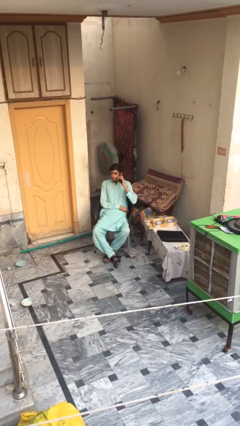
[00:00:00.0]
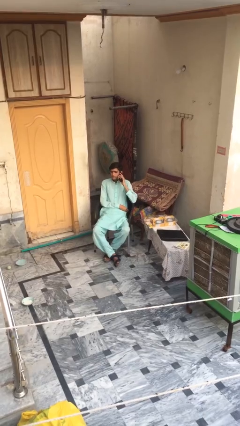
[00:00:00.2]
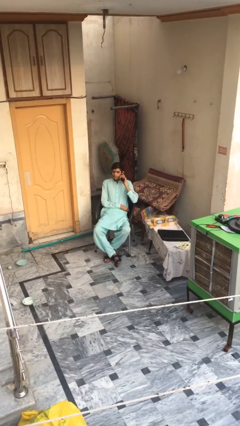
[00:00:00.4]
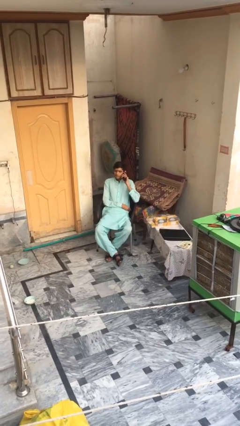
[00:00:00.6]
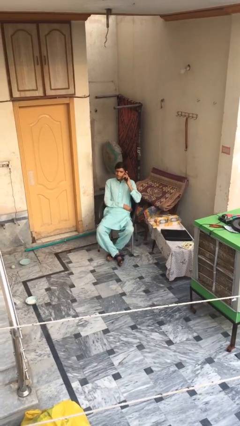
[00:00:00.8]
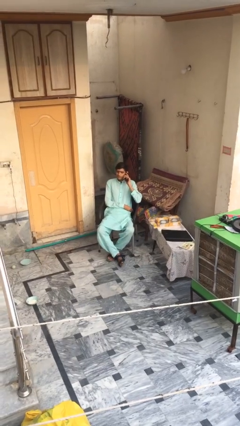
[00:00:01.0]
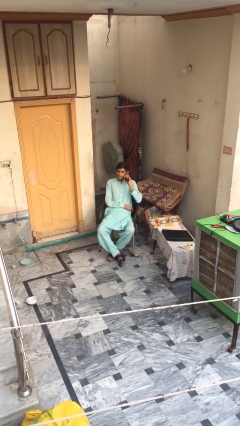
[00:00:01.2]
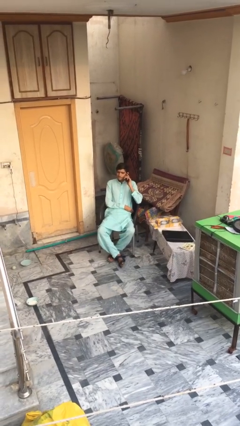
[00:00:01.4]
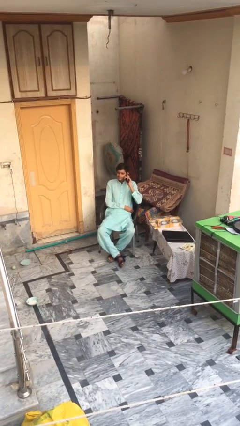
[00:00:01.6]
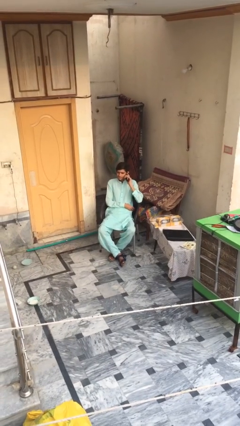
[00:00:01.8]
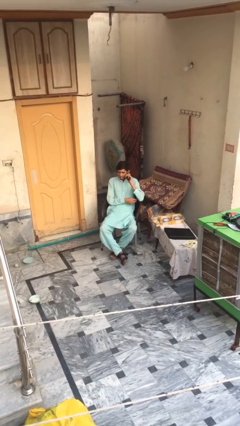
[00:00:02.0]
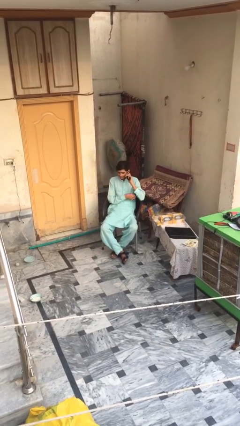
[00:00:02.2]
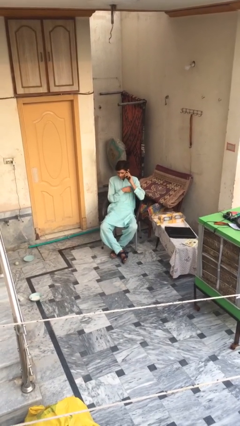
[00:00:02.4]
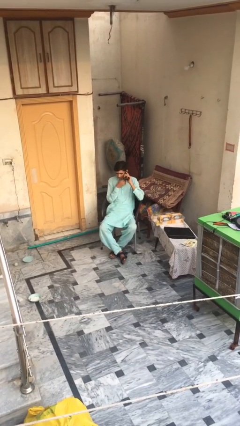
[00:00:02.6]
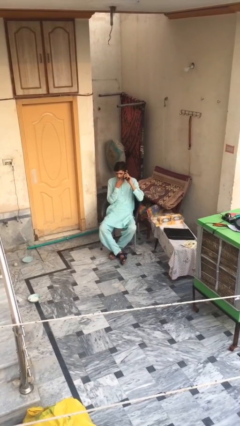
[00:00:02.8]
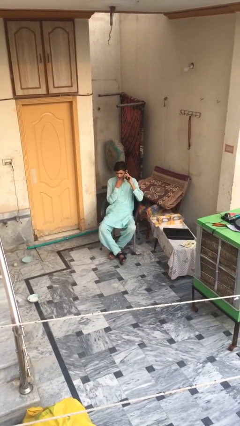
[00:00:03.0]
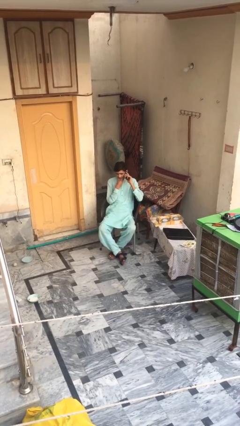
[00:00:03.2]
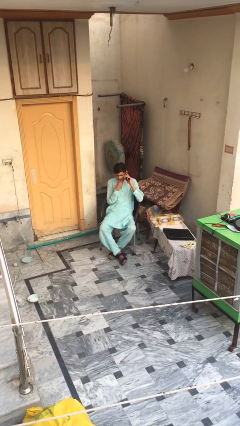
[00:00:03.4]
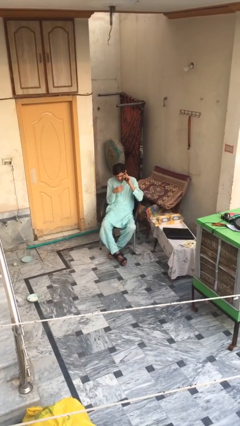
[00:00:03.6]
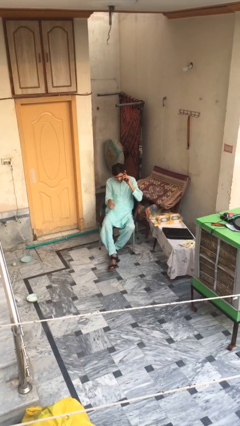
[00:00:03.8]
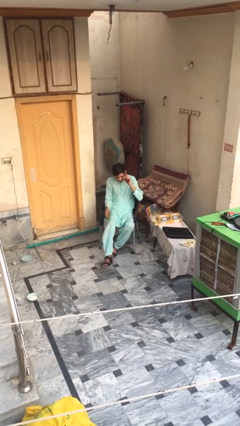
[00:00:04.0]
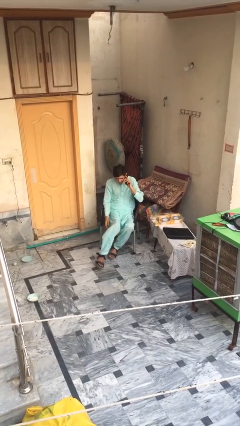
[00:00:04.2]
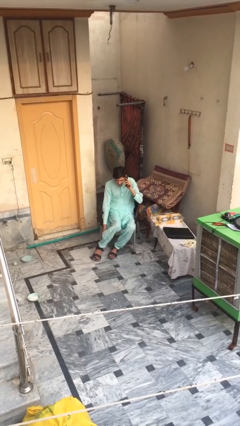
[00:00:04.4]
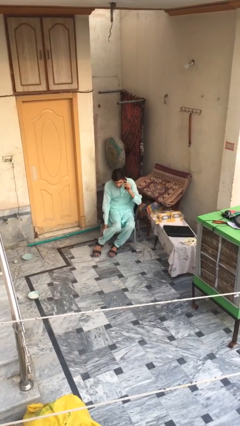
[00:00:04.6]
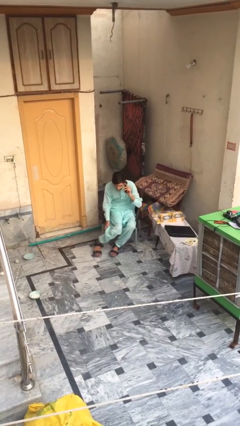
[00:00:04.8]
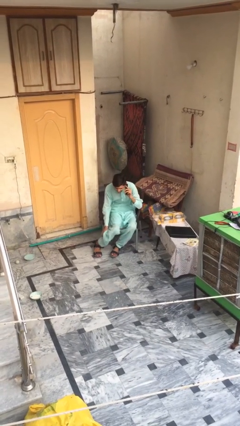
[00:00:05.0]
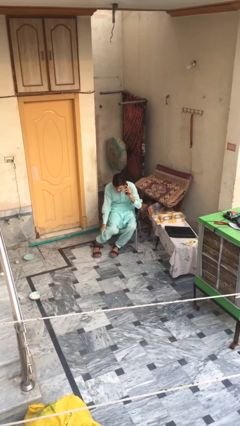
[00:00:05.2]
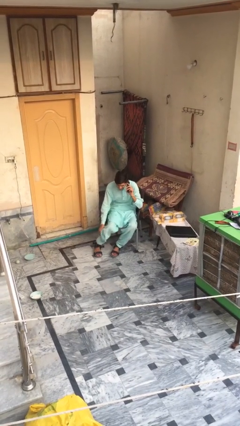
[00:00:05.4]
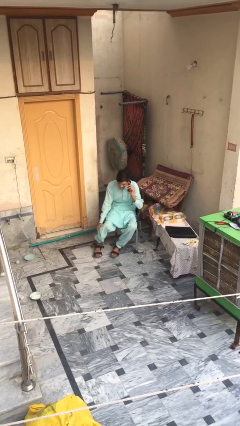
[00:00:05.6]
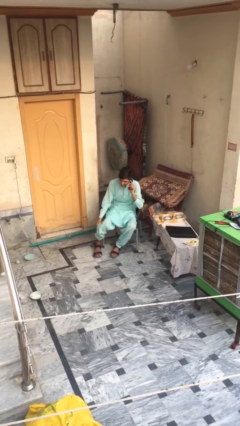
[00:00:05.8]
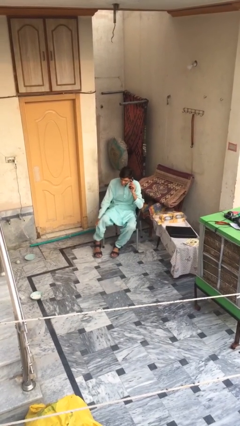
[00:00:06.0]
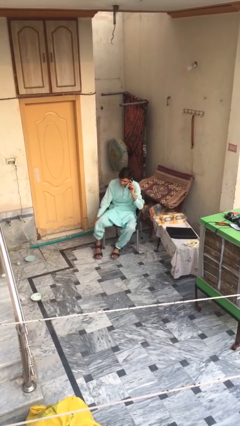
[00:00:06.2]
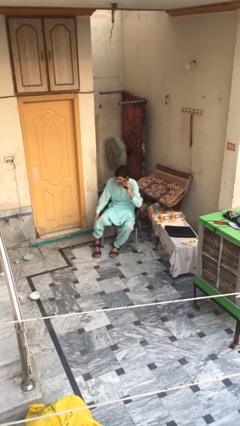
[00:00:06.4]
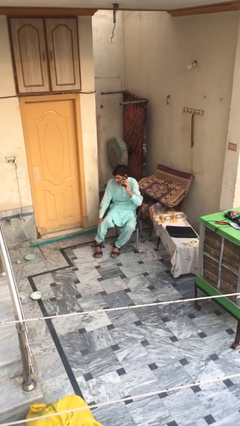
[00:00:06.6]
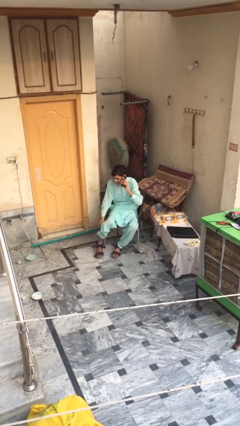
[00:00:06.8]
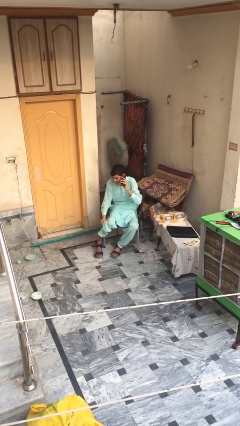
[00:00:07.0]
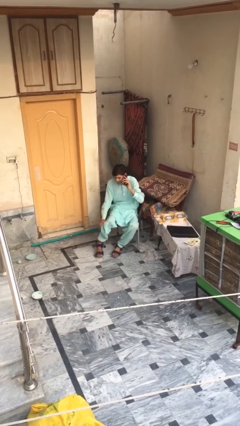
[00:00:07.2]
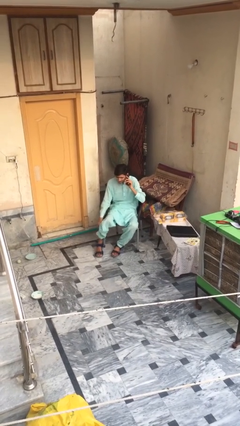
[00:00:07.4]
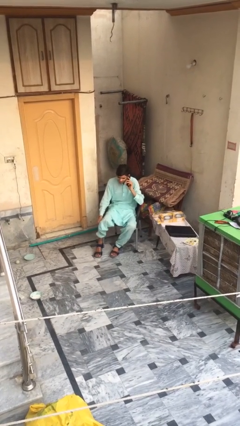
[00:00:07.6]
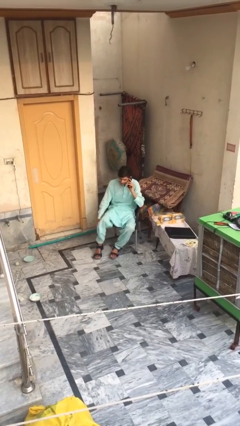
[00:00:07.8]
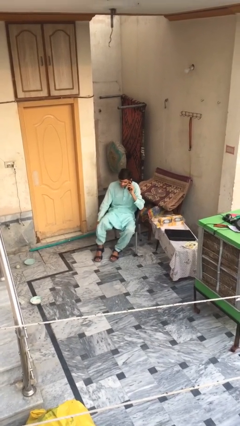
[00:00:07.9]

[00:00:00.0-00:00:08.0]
person talks on phone

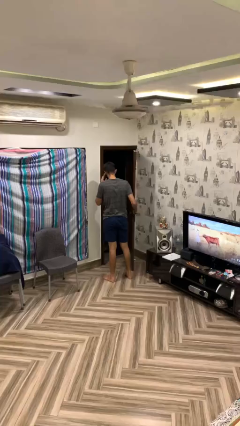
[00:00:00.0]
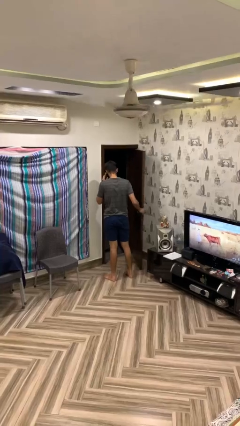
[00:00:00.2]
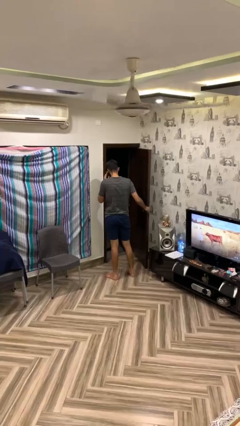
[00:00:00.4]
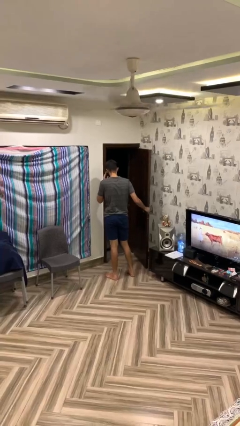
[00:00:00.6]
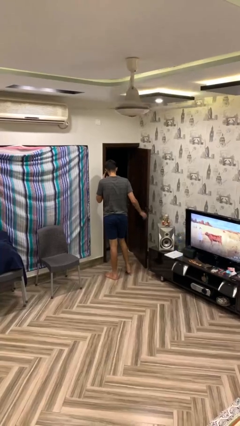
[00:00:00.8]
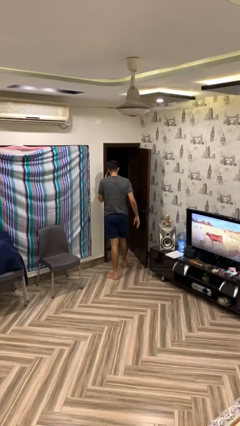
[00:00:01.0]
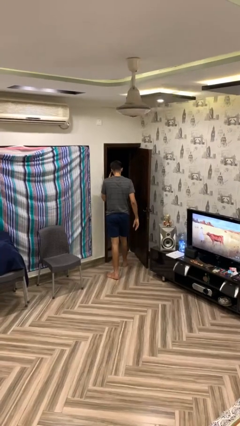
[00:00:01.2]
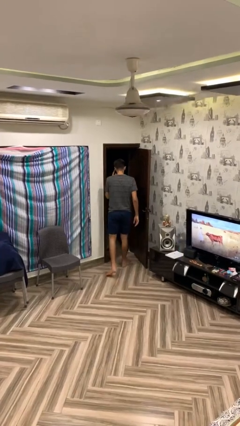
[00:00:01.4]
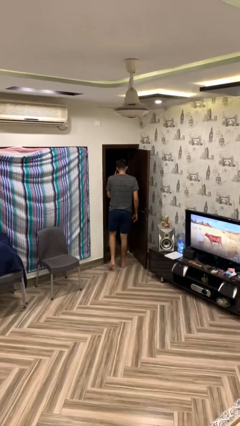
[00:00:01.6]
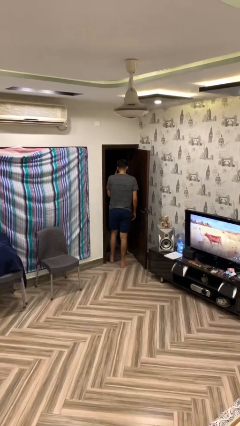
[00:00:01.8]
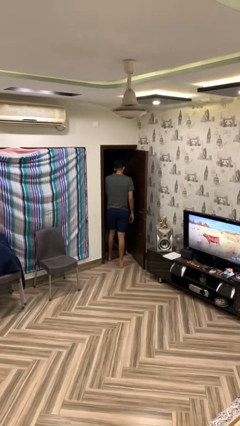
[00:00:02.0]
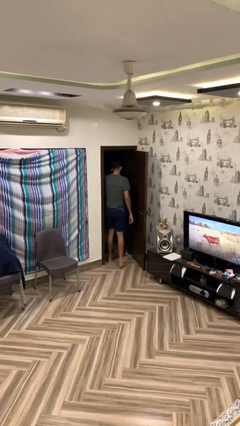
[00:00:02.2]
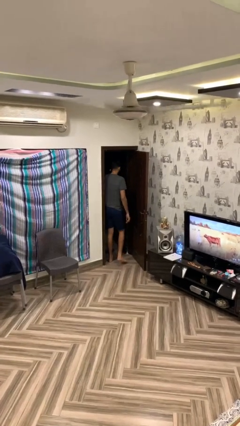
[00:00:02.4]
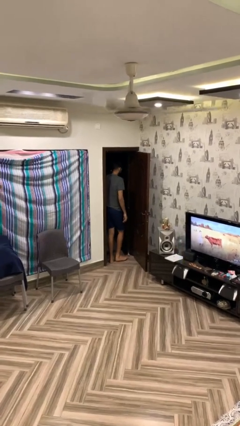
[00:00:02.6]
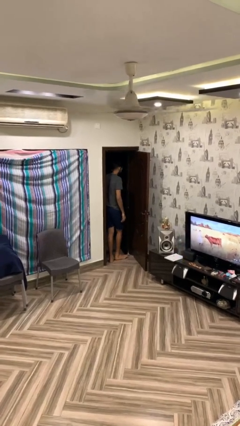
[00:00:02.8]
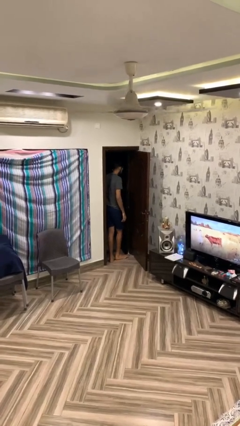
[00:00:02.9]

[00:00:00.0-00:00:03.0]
person exits scene through structure

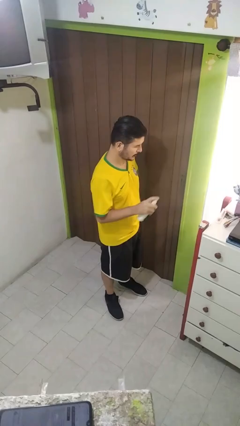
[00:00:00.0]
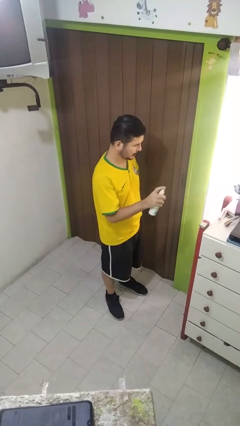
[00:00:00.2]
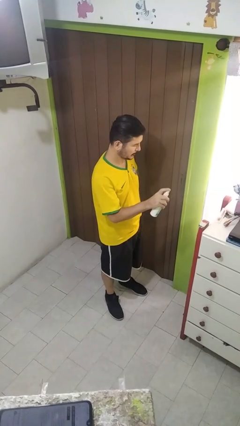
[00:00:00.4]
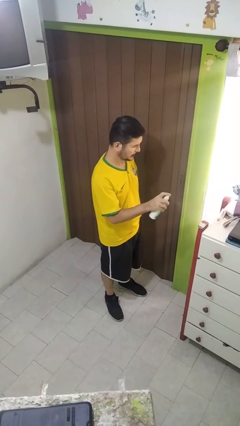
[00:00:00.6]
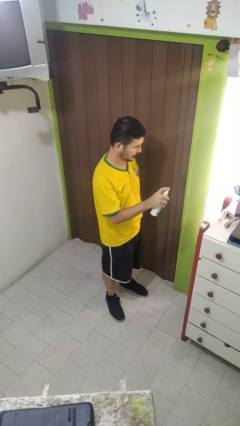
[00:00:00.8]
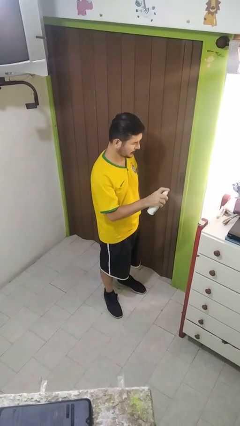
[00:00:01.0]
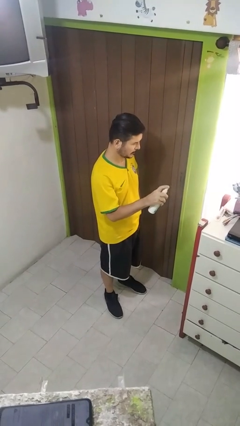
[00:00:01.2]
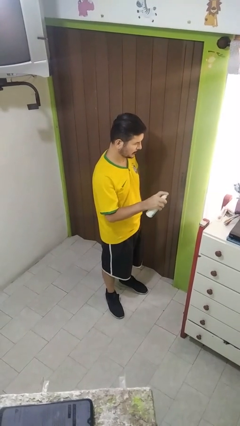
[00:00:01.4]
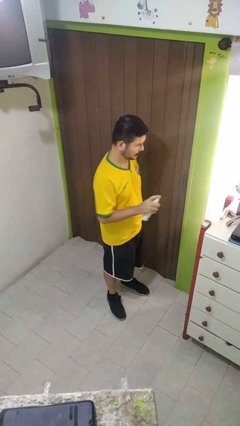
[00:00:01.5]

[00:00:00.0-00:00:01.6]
person sprays from bottle

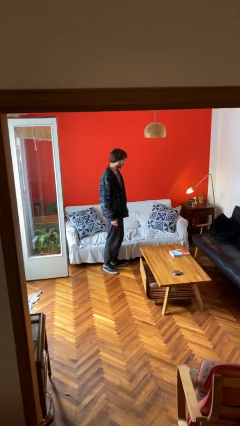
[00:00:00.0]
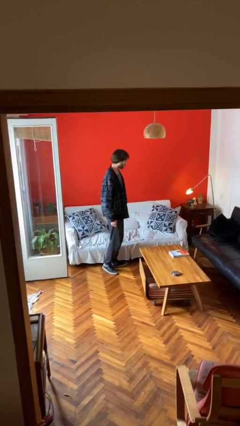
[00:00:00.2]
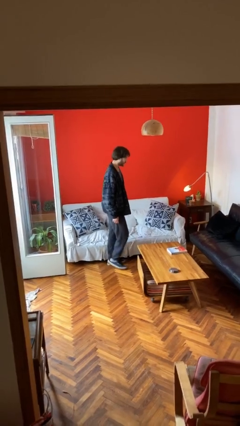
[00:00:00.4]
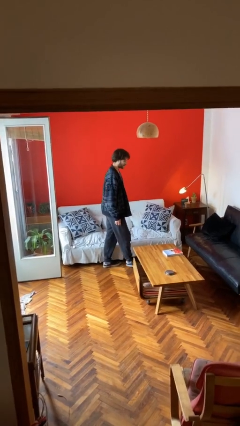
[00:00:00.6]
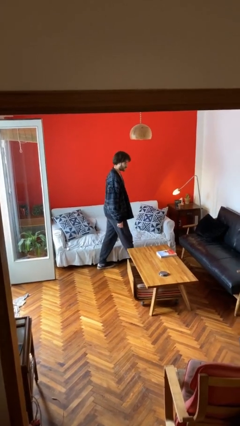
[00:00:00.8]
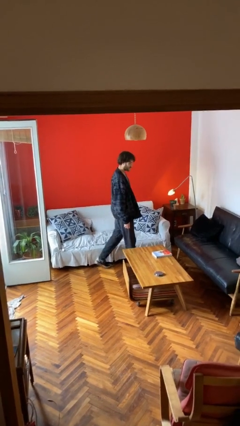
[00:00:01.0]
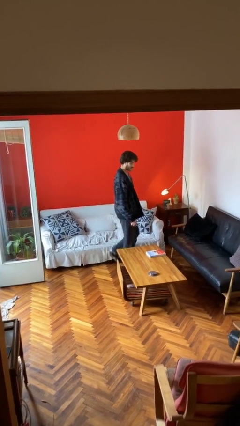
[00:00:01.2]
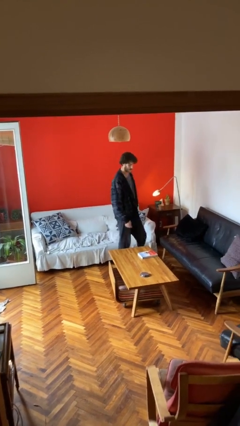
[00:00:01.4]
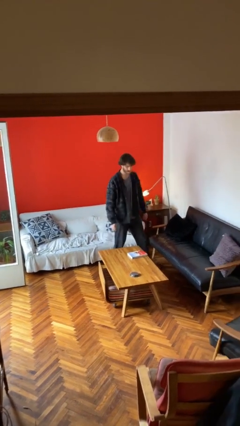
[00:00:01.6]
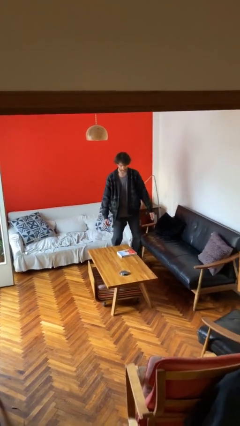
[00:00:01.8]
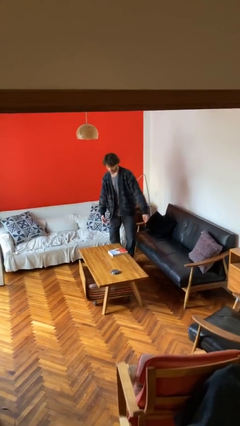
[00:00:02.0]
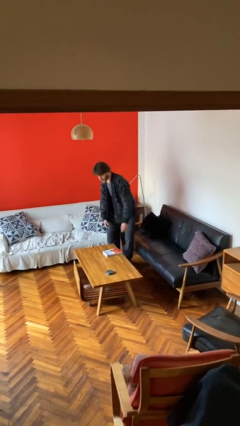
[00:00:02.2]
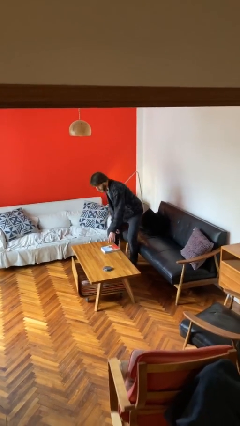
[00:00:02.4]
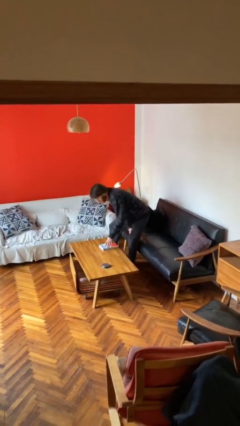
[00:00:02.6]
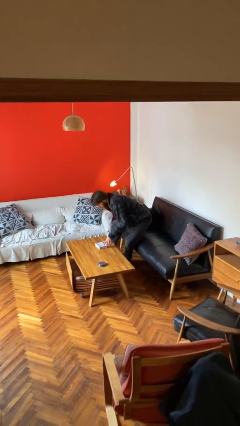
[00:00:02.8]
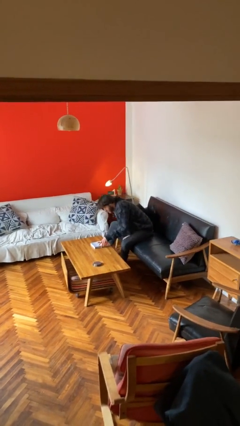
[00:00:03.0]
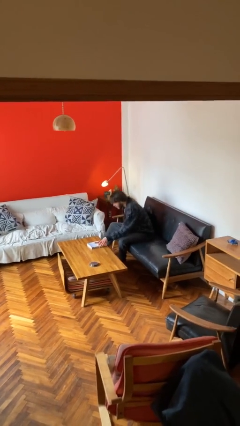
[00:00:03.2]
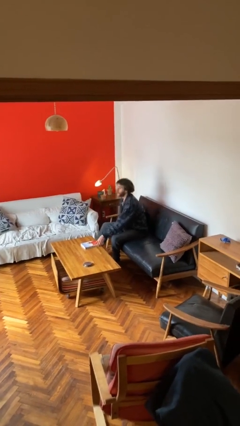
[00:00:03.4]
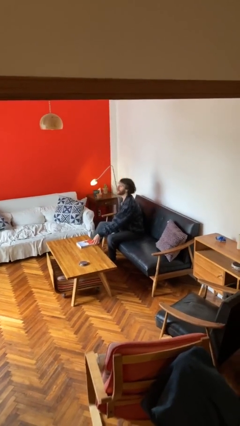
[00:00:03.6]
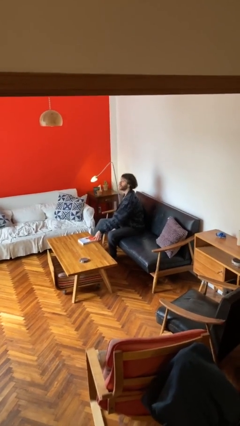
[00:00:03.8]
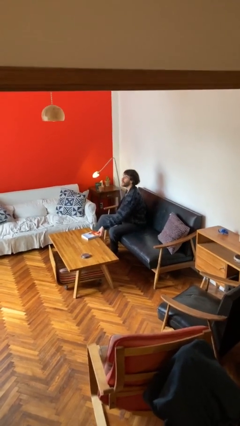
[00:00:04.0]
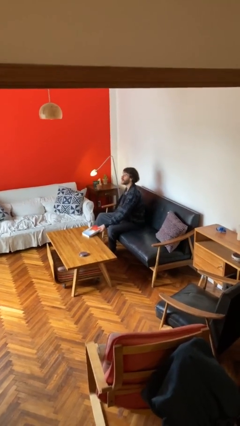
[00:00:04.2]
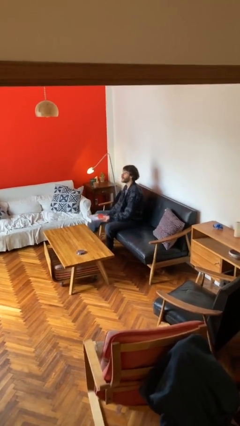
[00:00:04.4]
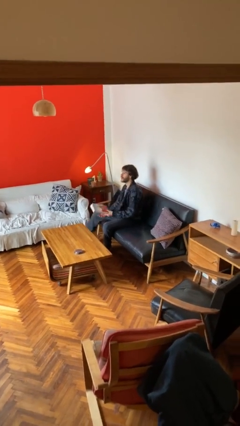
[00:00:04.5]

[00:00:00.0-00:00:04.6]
person sits down

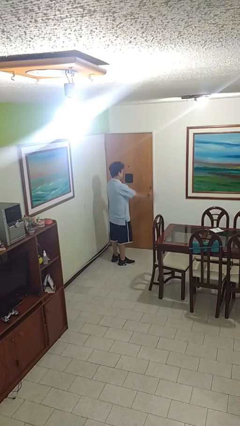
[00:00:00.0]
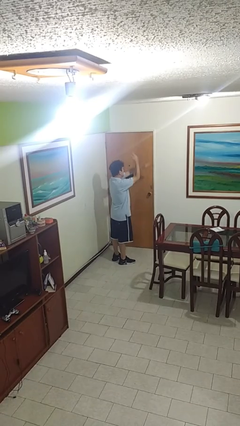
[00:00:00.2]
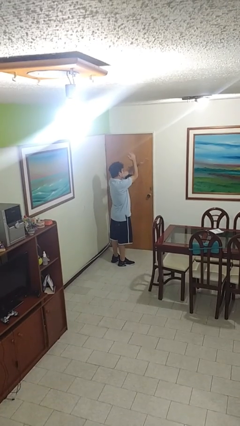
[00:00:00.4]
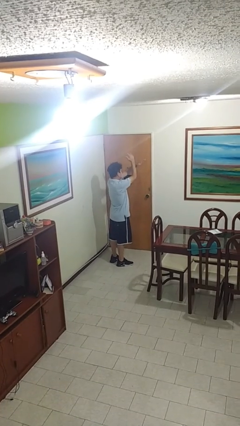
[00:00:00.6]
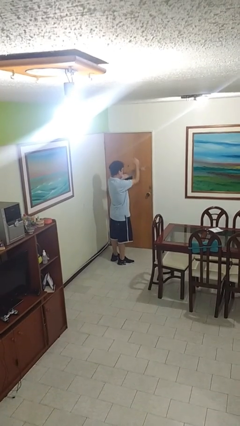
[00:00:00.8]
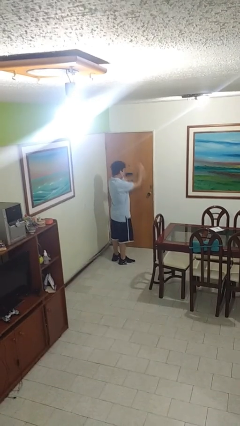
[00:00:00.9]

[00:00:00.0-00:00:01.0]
person gestures arms x
